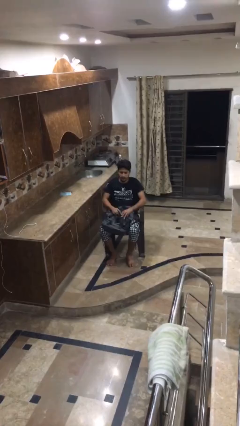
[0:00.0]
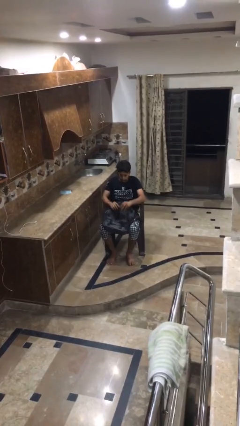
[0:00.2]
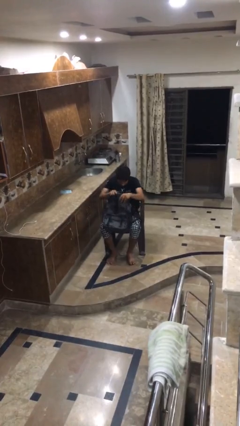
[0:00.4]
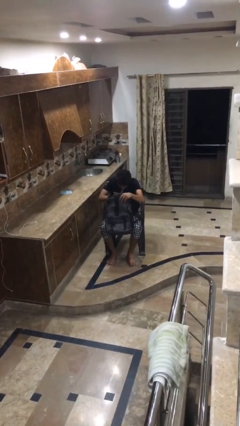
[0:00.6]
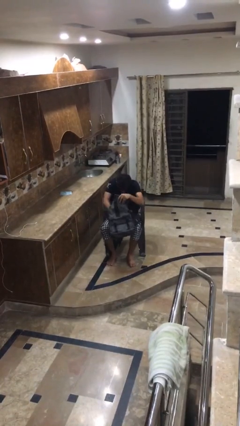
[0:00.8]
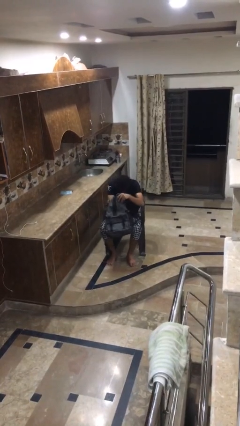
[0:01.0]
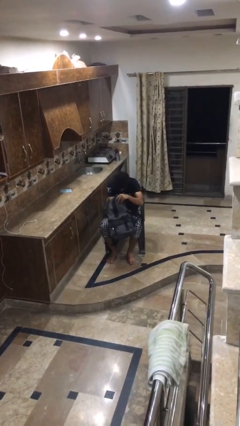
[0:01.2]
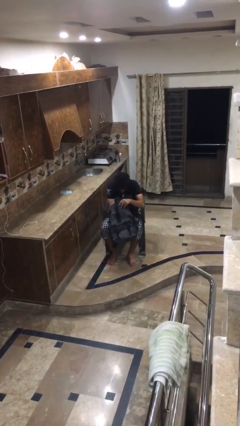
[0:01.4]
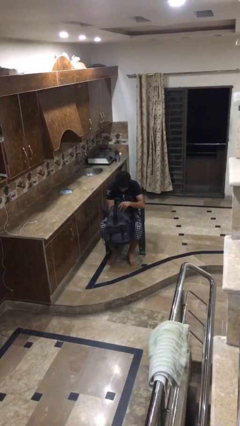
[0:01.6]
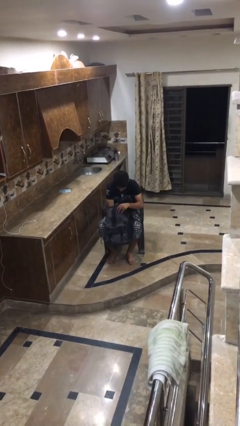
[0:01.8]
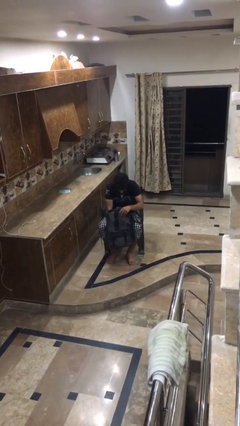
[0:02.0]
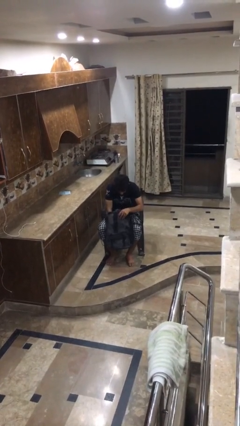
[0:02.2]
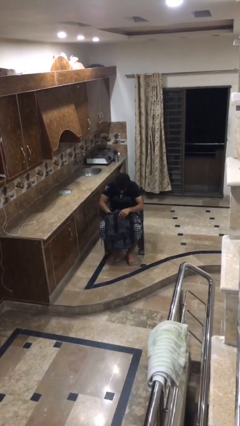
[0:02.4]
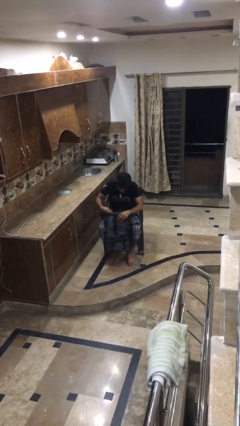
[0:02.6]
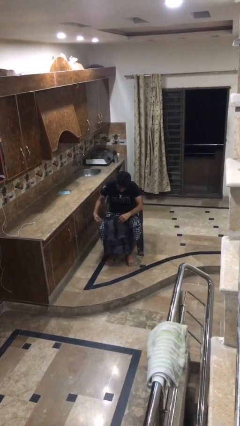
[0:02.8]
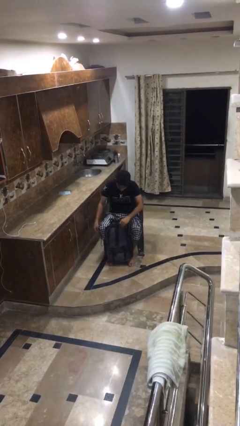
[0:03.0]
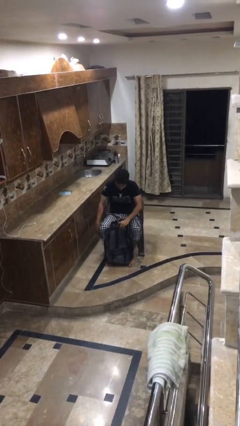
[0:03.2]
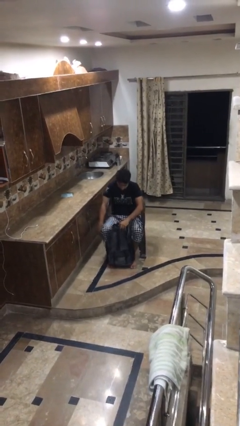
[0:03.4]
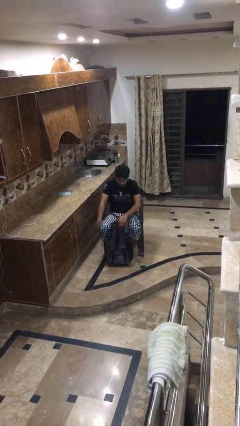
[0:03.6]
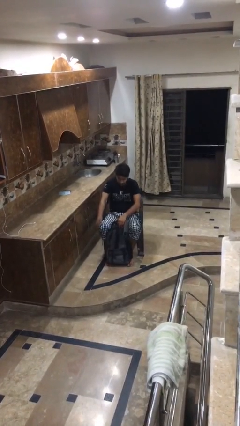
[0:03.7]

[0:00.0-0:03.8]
person searches in bag

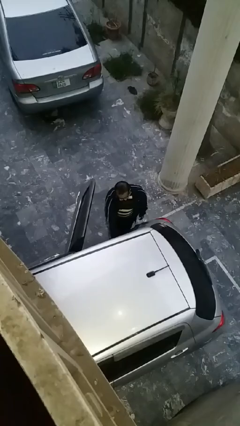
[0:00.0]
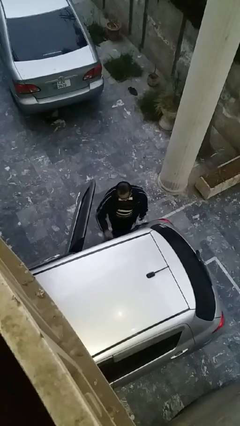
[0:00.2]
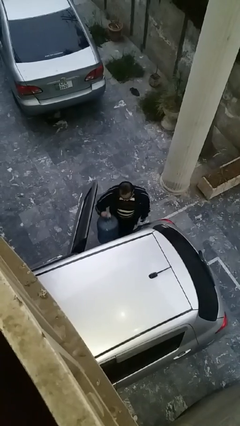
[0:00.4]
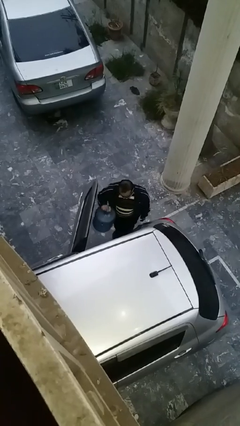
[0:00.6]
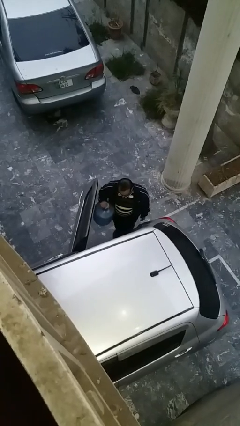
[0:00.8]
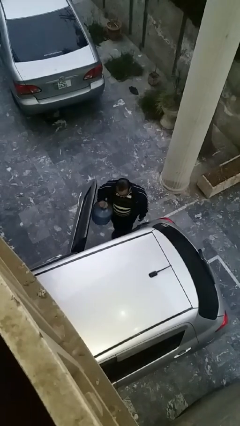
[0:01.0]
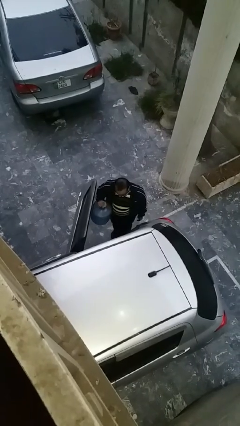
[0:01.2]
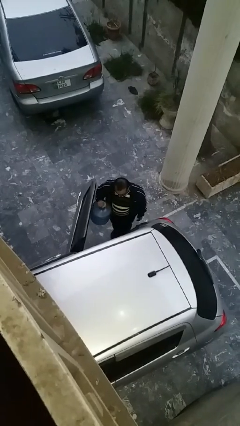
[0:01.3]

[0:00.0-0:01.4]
person unloads car

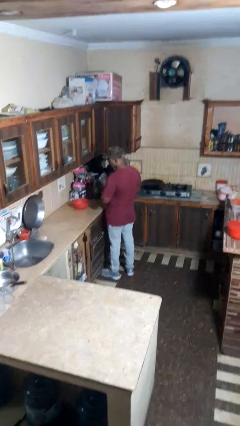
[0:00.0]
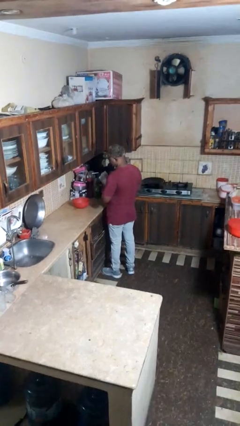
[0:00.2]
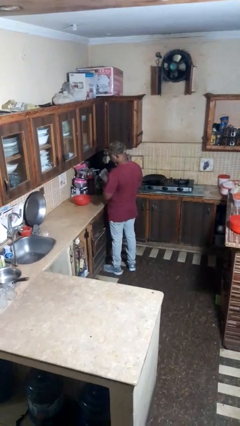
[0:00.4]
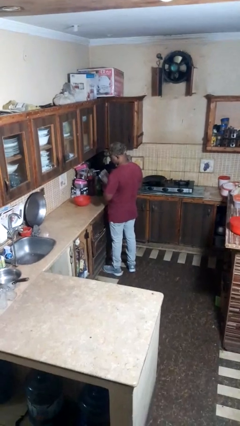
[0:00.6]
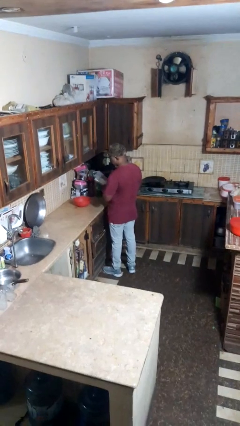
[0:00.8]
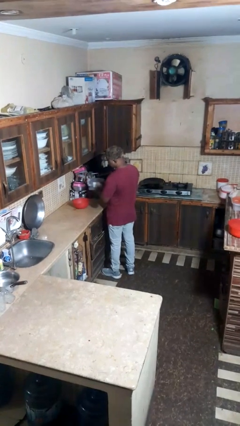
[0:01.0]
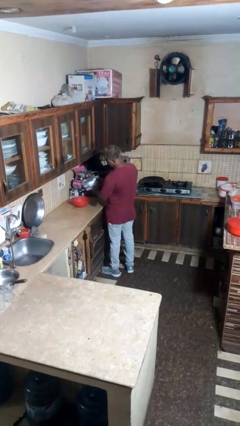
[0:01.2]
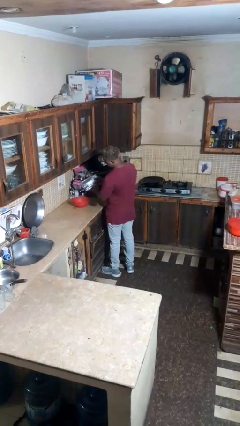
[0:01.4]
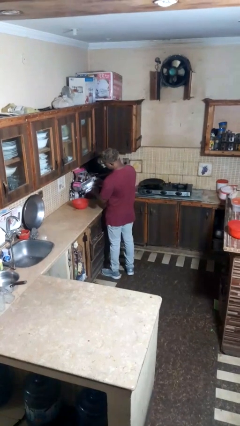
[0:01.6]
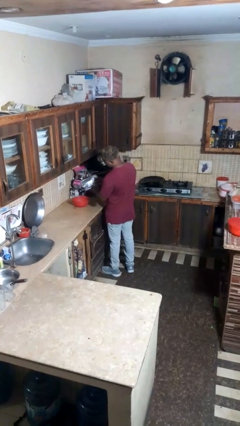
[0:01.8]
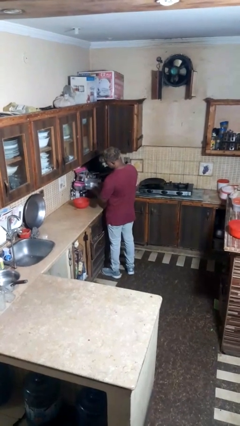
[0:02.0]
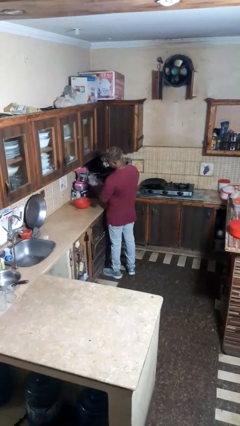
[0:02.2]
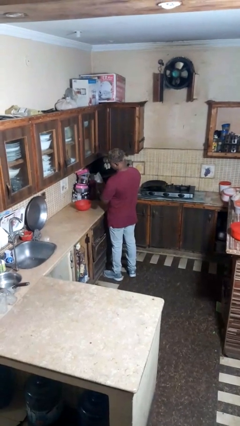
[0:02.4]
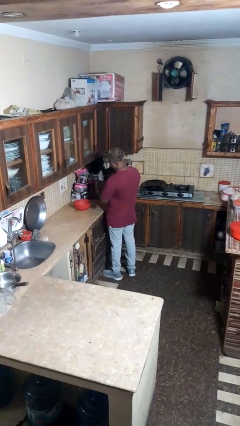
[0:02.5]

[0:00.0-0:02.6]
person pours into bowl

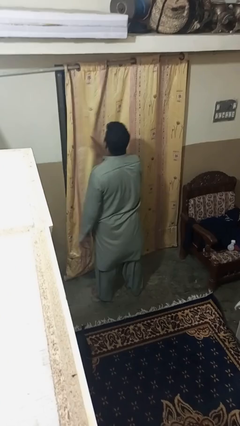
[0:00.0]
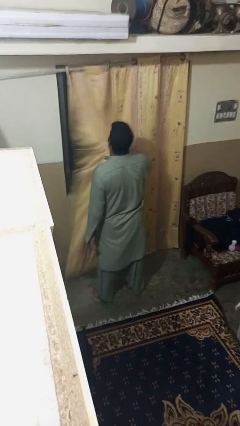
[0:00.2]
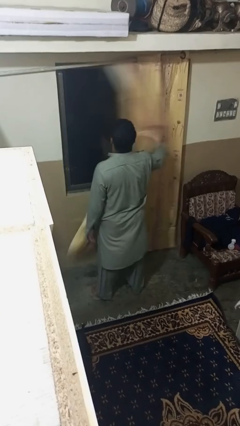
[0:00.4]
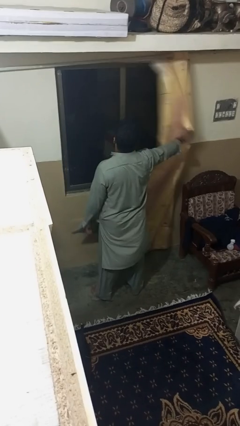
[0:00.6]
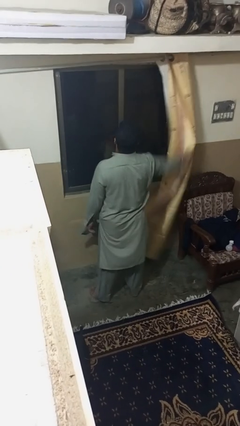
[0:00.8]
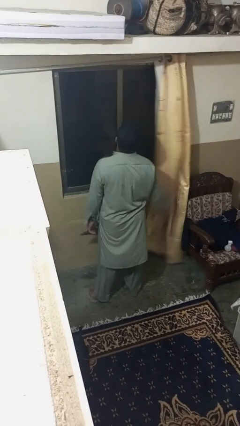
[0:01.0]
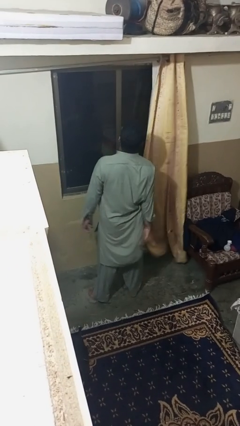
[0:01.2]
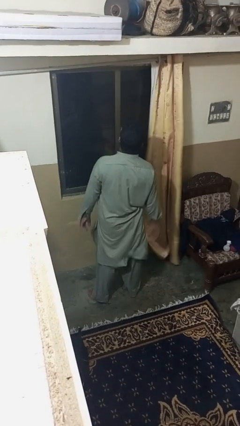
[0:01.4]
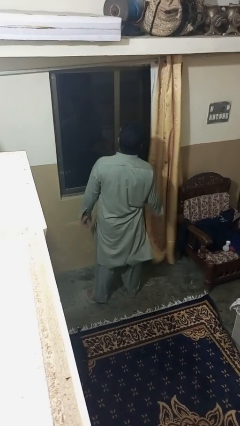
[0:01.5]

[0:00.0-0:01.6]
person opens curtains

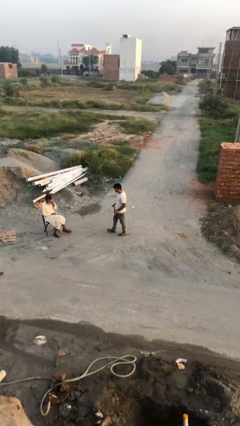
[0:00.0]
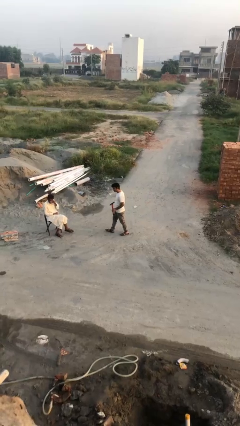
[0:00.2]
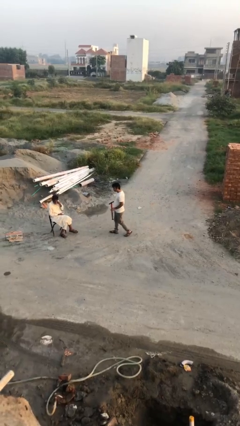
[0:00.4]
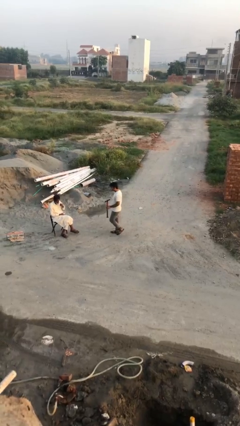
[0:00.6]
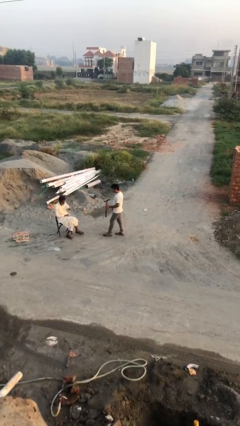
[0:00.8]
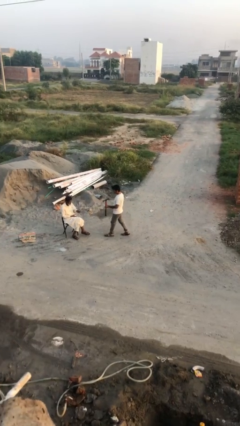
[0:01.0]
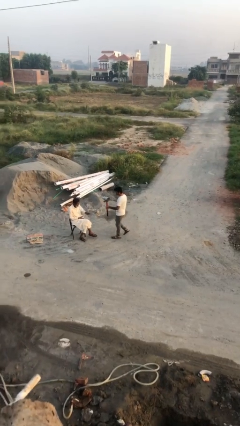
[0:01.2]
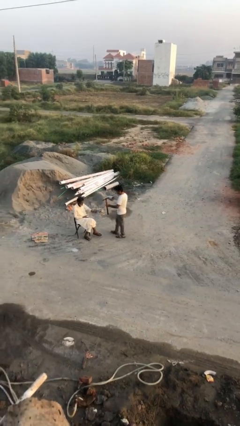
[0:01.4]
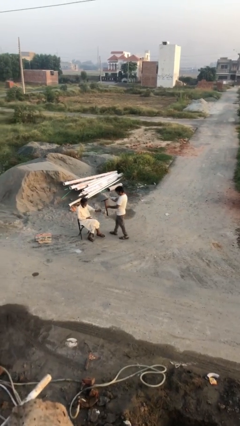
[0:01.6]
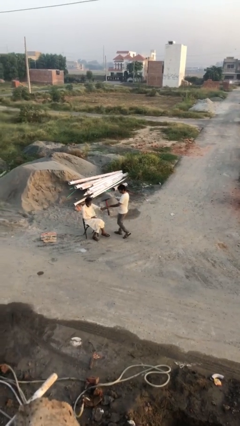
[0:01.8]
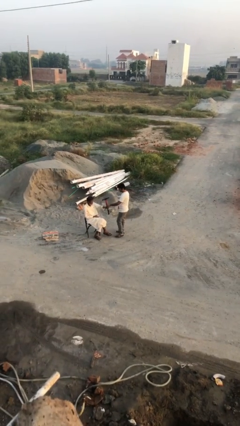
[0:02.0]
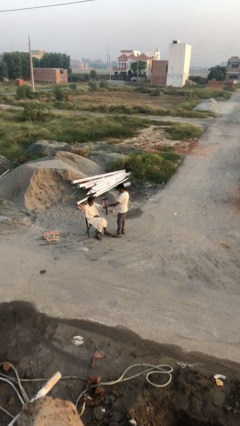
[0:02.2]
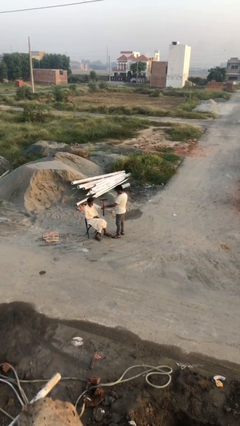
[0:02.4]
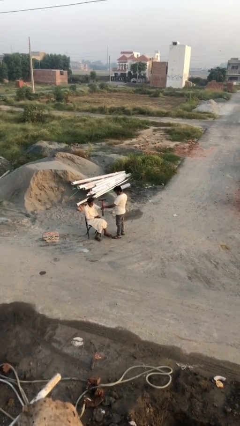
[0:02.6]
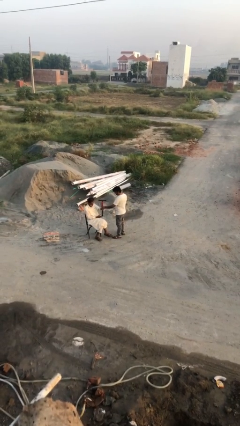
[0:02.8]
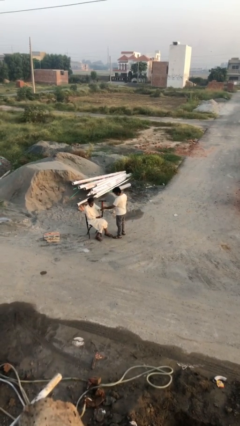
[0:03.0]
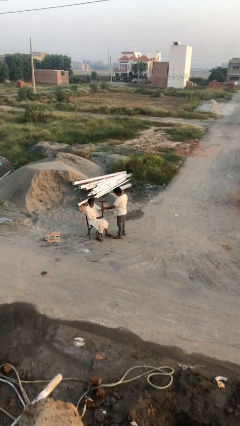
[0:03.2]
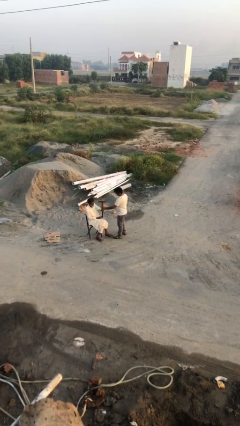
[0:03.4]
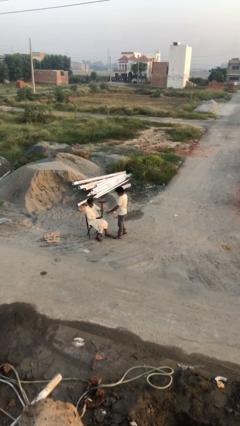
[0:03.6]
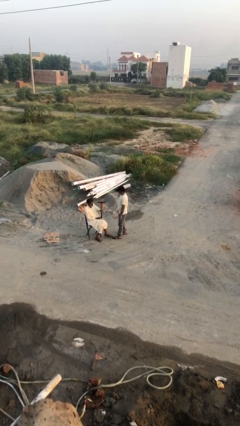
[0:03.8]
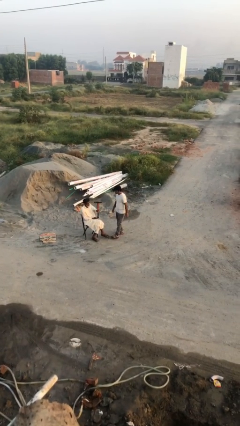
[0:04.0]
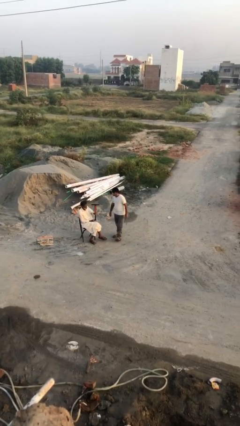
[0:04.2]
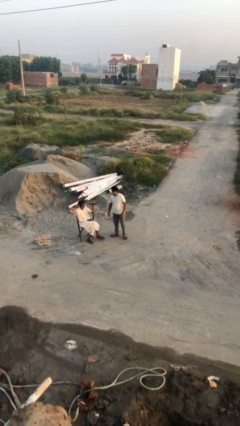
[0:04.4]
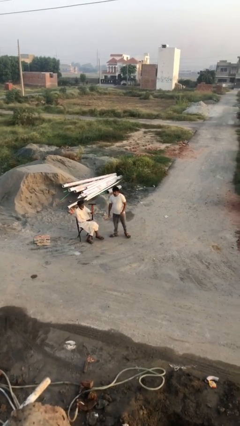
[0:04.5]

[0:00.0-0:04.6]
person transfers object to person

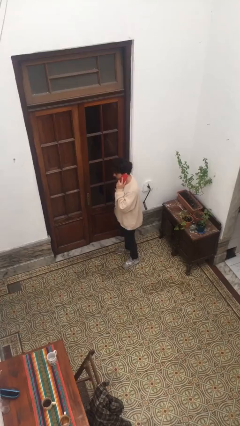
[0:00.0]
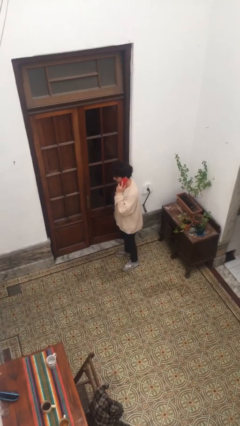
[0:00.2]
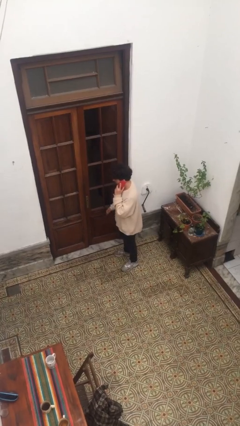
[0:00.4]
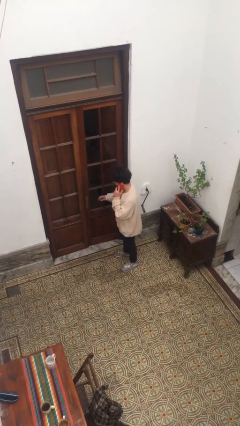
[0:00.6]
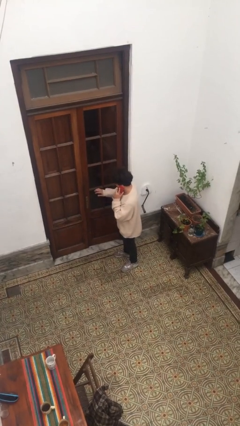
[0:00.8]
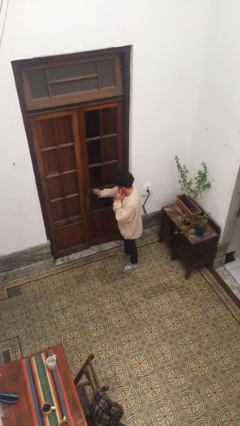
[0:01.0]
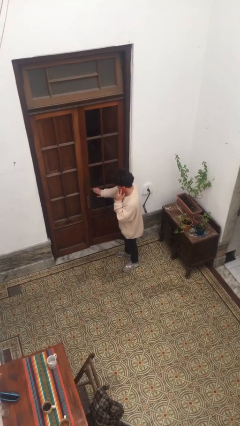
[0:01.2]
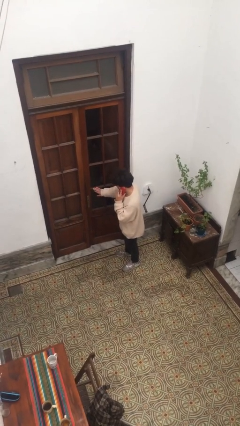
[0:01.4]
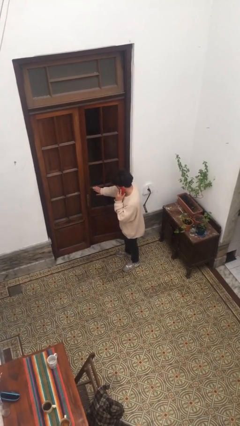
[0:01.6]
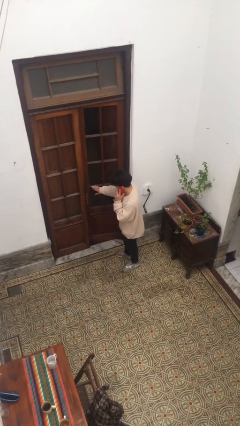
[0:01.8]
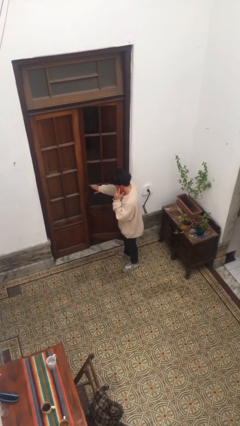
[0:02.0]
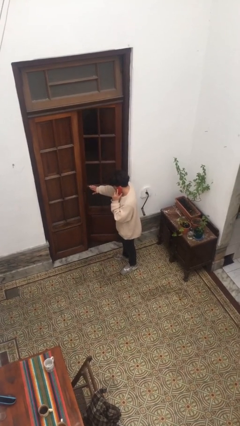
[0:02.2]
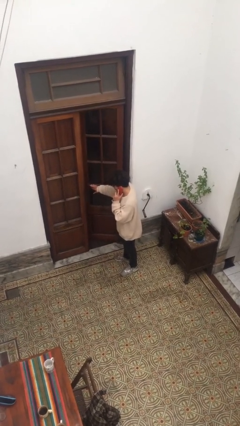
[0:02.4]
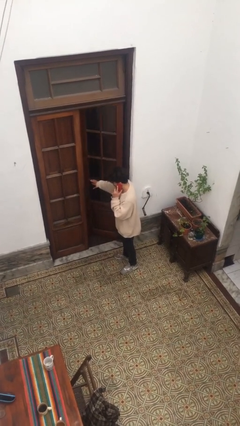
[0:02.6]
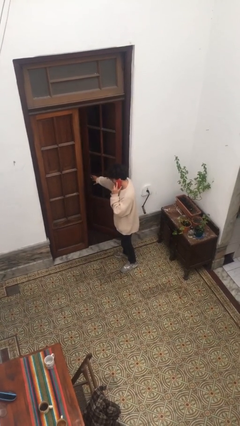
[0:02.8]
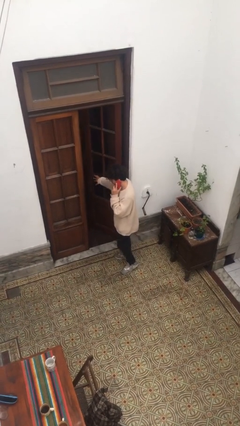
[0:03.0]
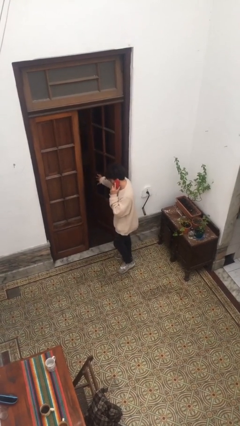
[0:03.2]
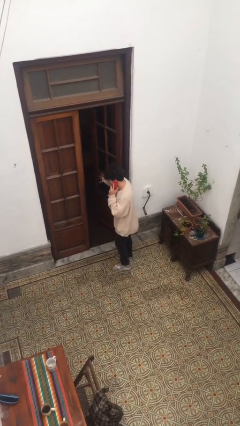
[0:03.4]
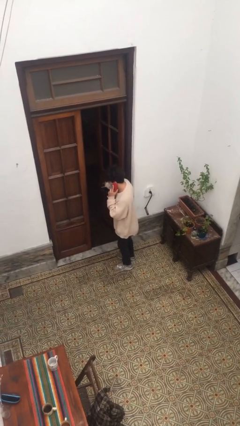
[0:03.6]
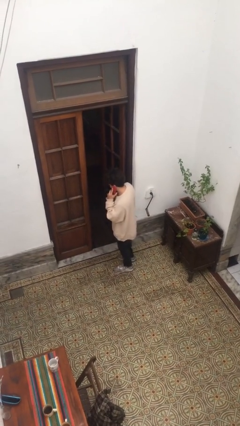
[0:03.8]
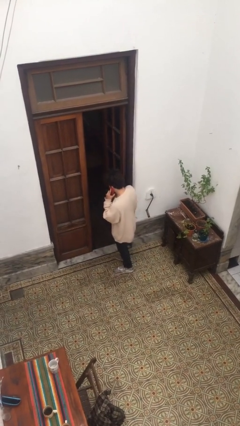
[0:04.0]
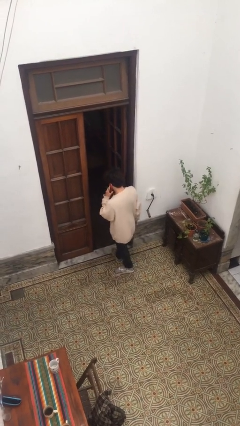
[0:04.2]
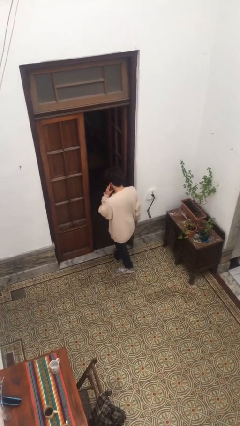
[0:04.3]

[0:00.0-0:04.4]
person opens facility door
